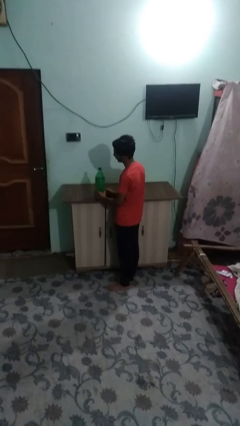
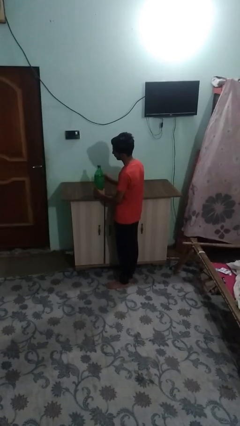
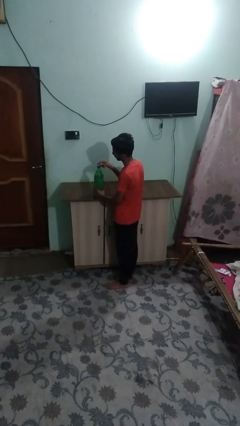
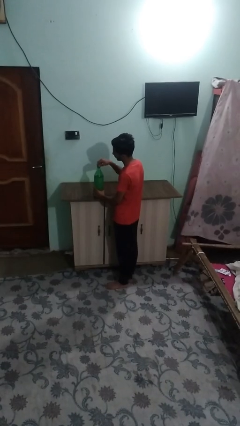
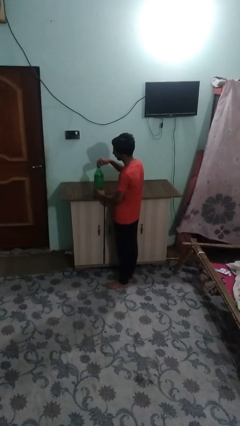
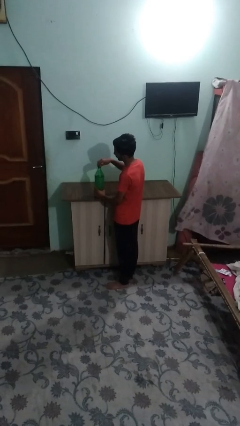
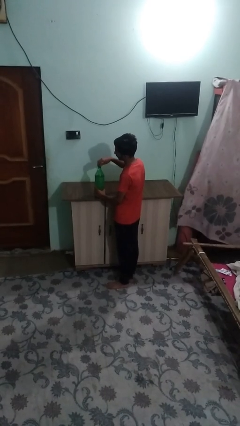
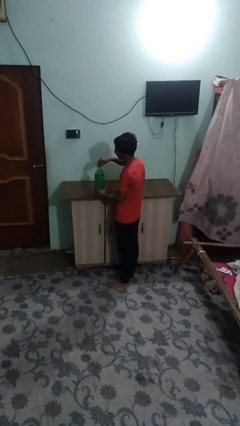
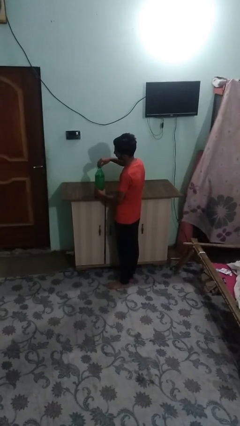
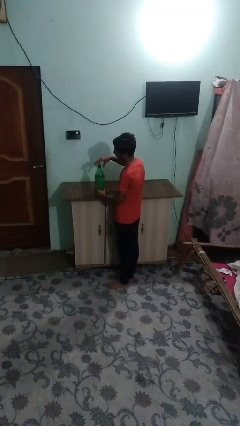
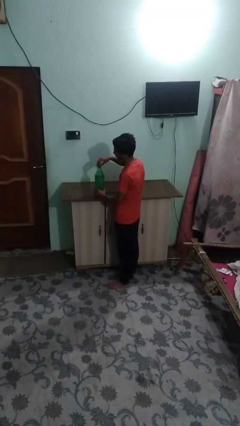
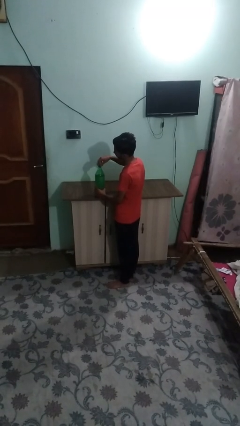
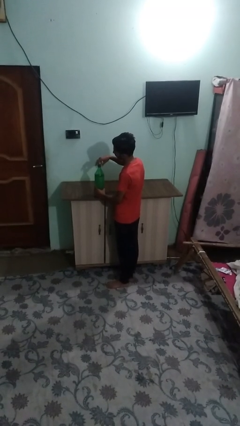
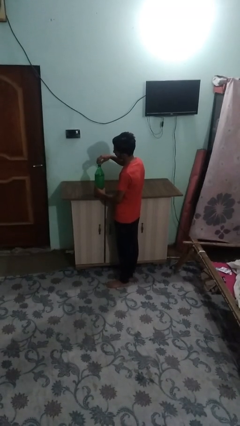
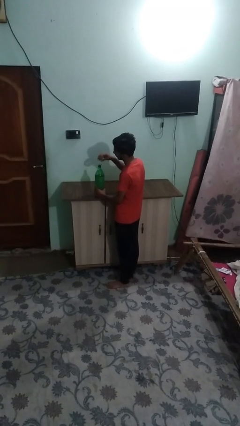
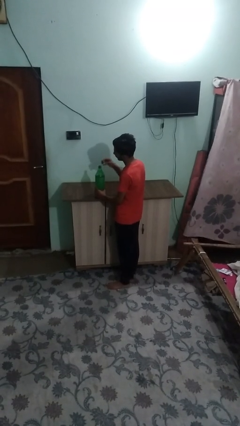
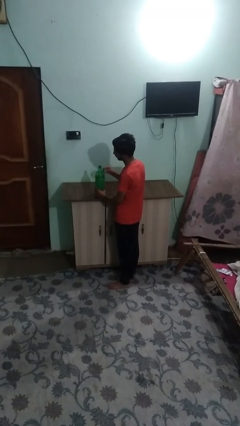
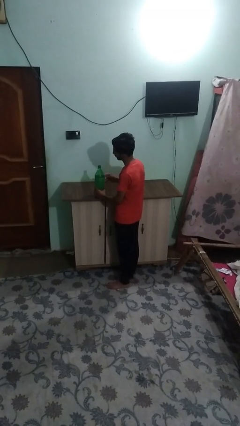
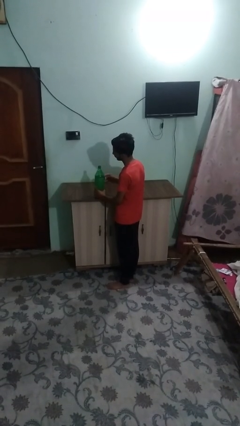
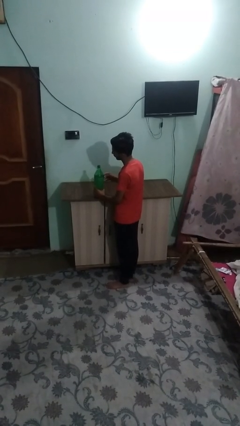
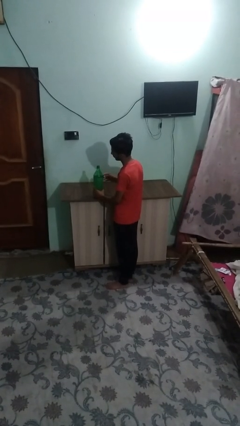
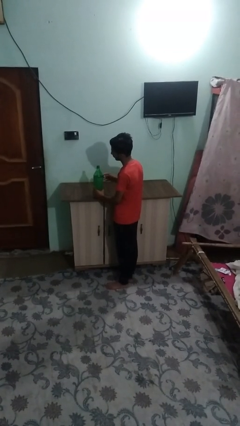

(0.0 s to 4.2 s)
person unscrews lid from bottle

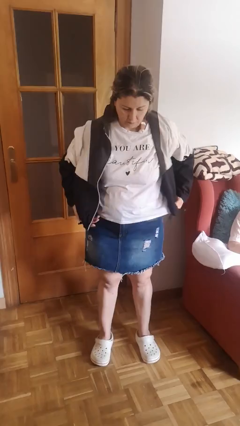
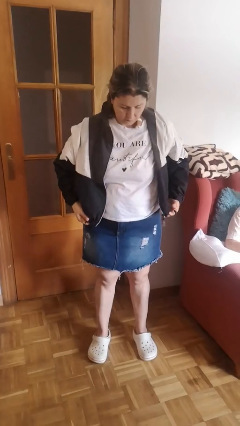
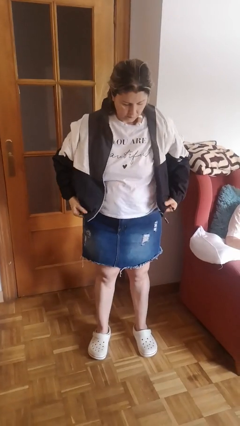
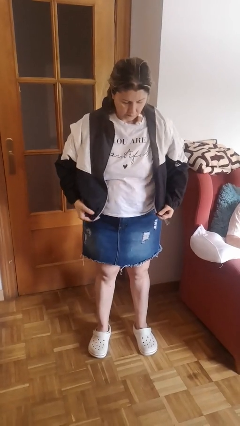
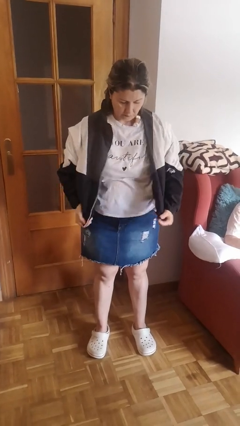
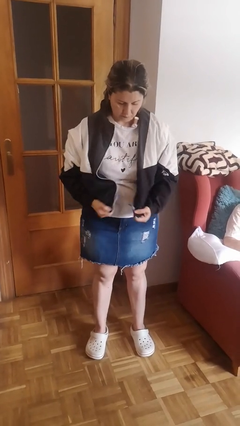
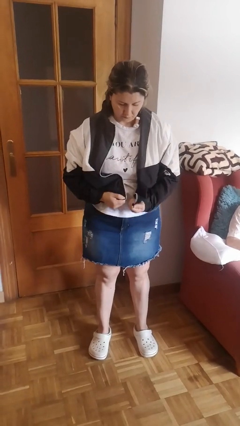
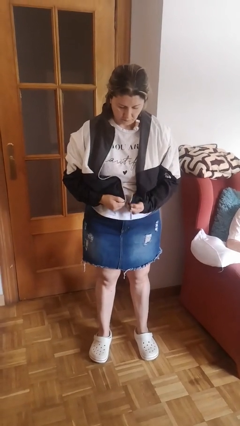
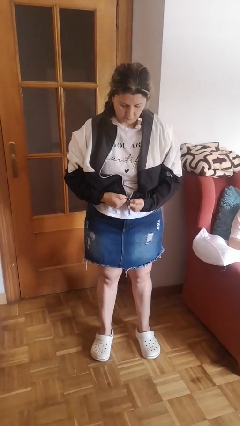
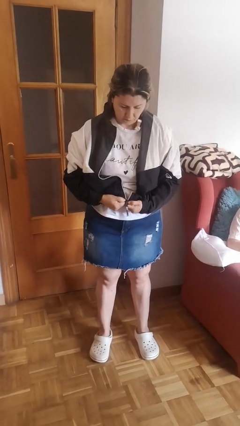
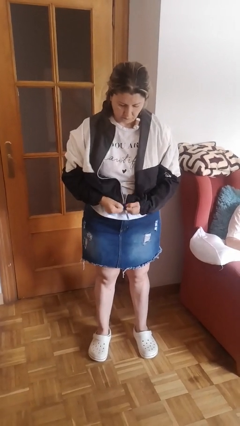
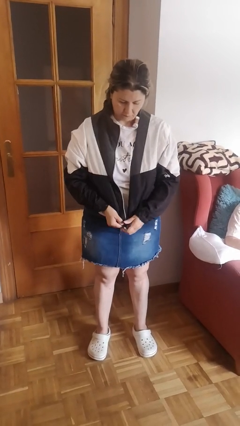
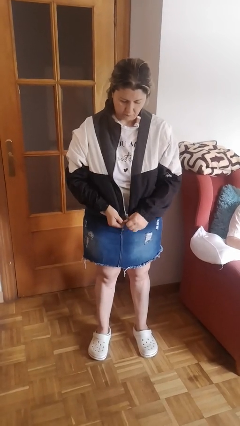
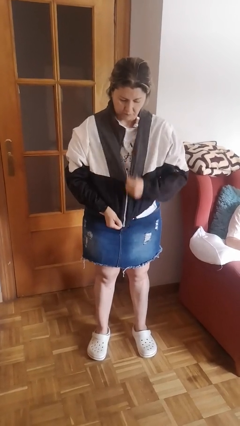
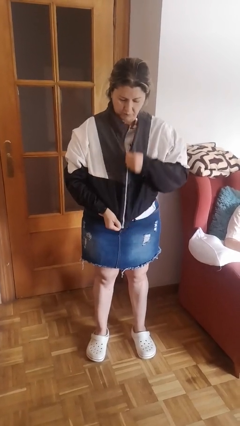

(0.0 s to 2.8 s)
person zips up jacket

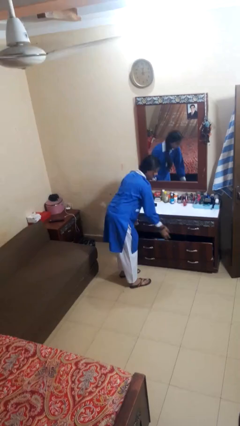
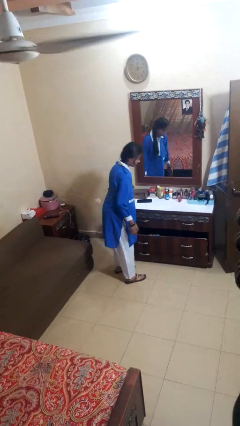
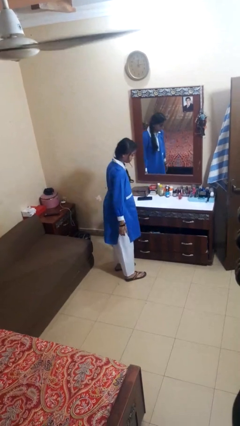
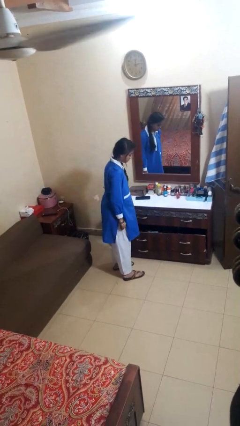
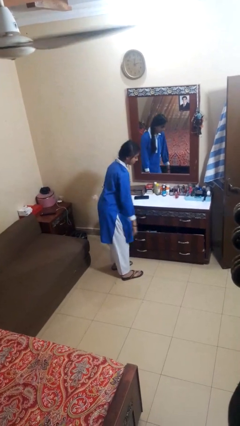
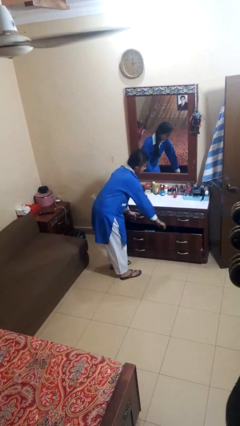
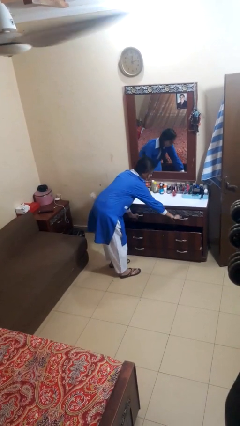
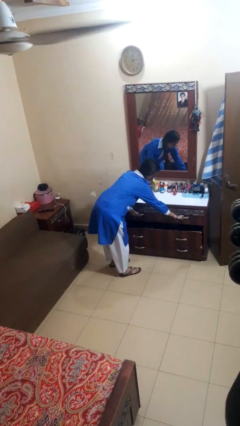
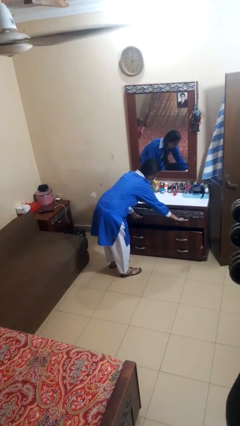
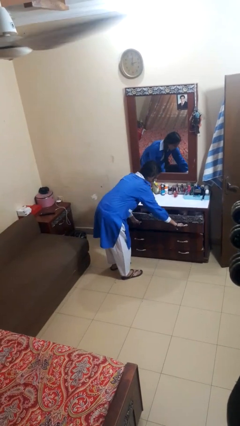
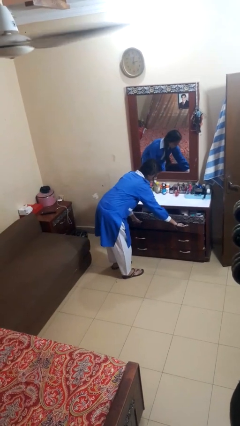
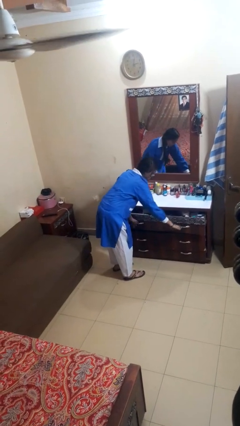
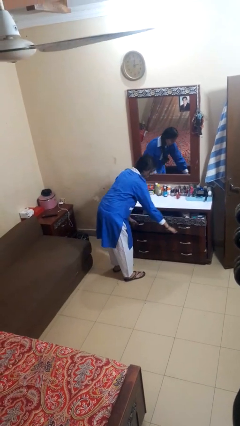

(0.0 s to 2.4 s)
person opens dresser drawer

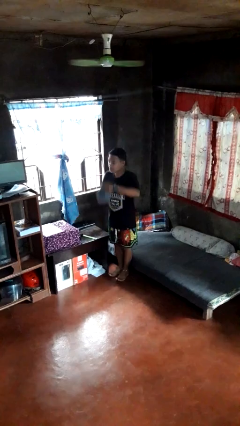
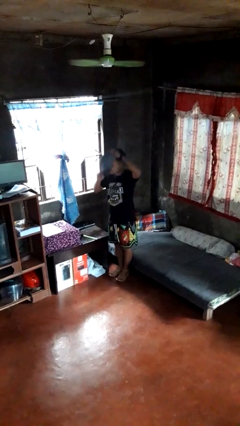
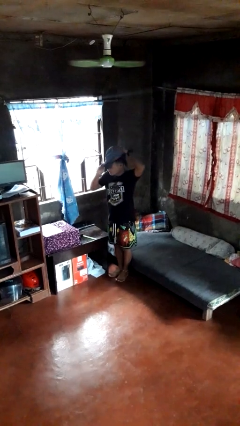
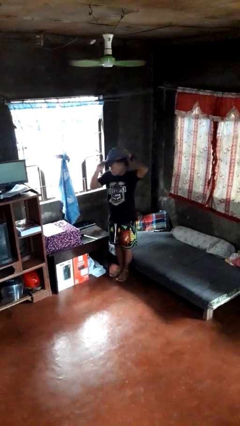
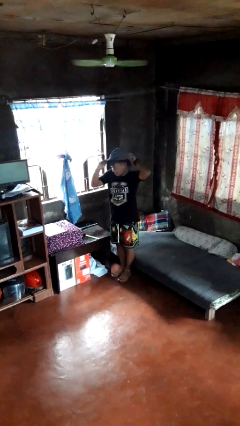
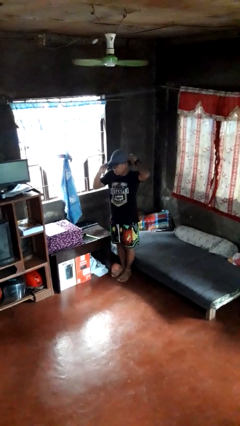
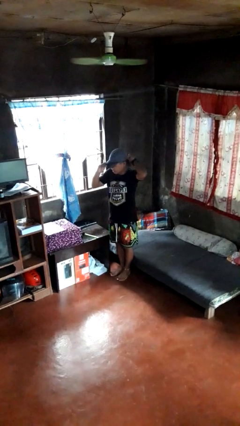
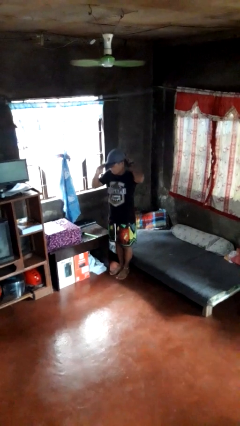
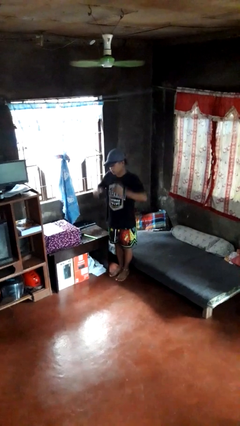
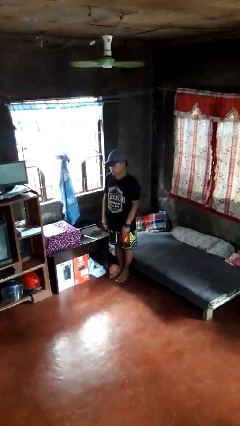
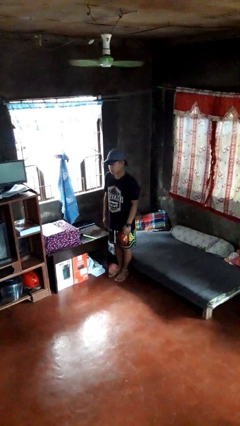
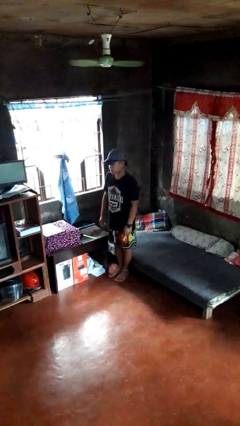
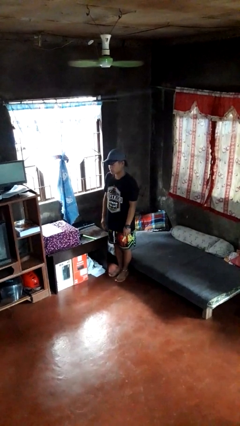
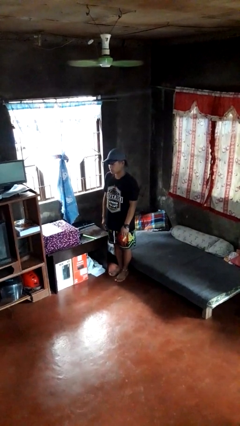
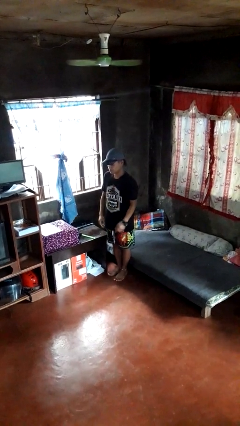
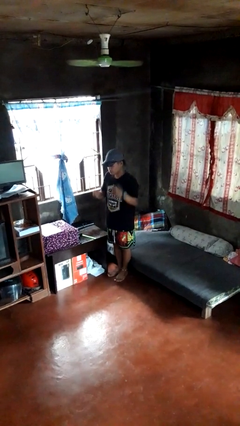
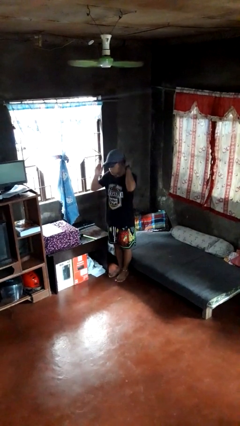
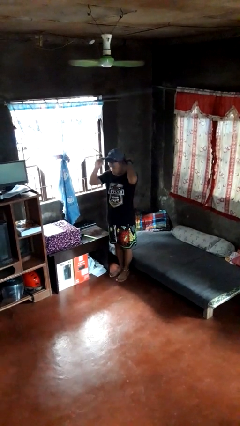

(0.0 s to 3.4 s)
person puts on hat

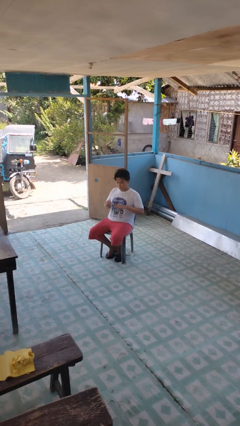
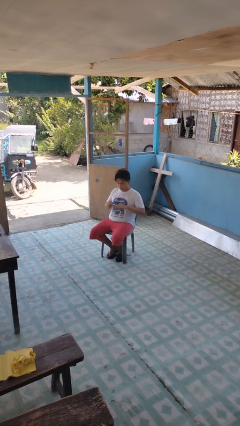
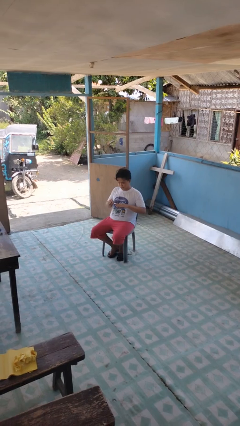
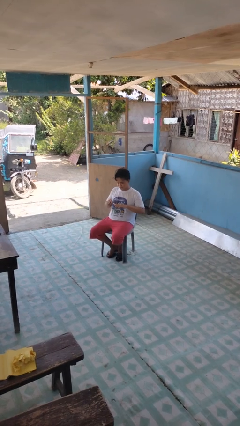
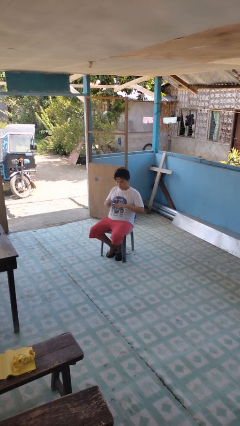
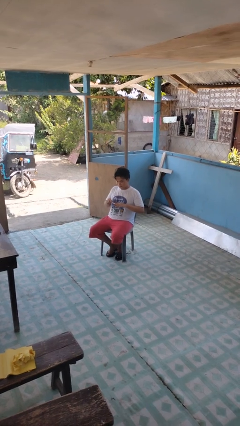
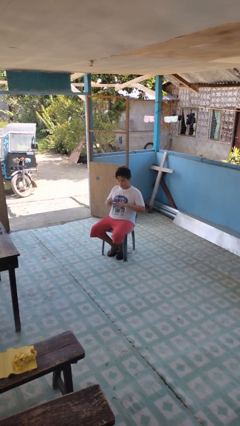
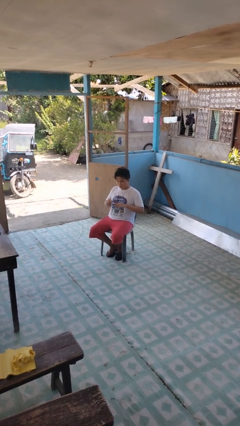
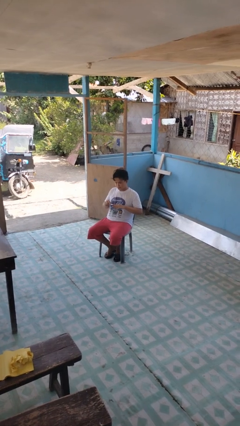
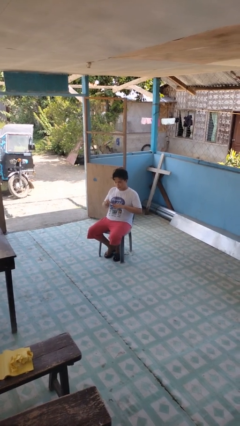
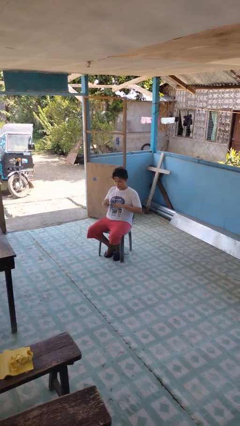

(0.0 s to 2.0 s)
person files fingernails

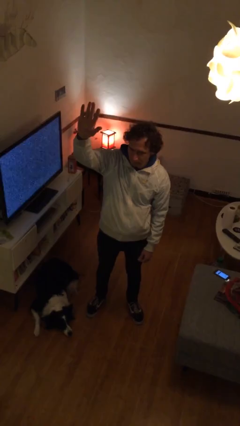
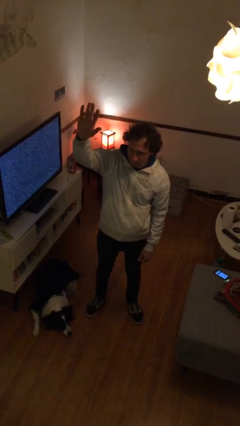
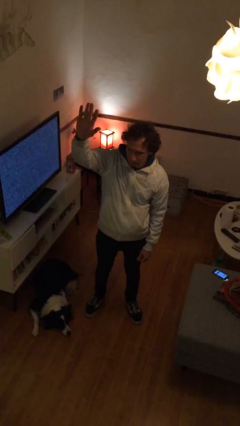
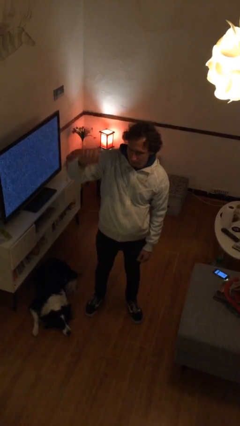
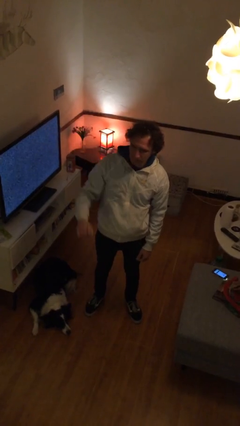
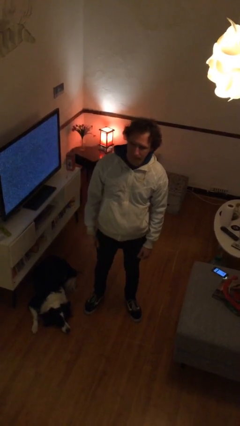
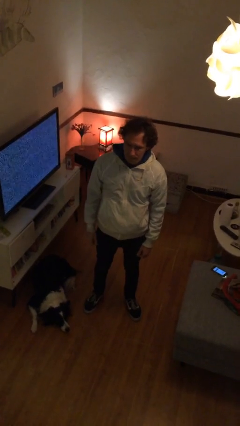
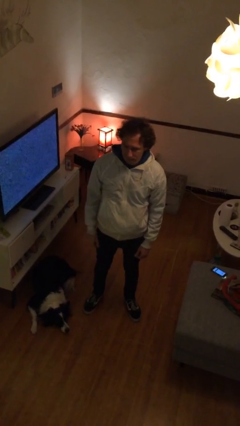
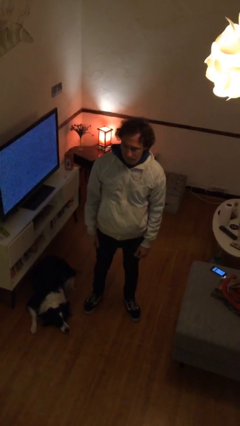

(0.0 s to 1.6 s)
person gestures lower hand

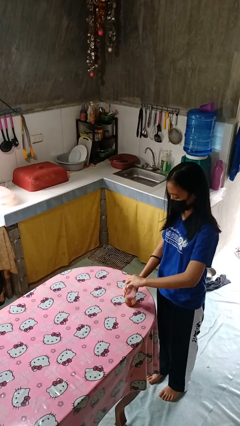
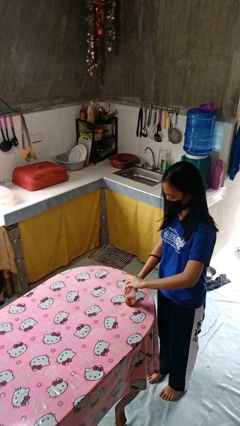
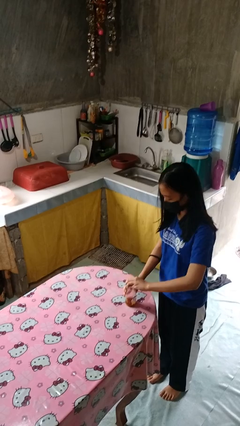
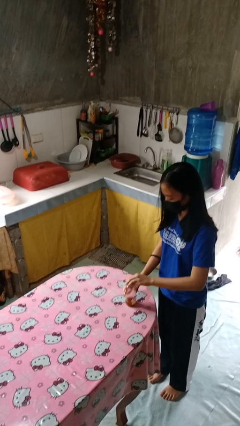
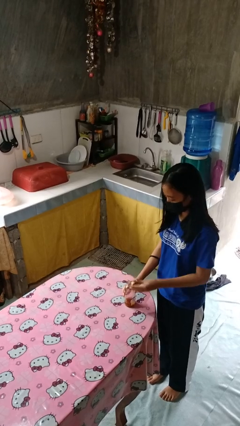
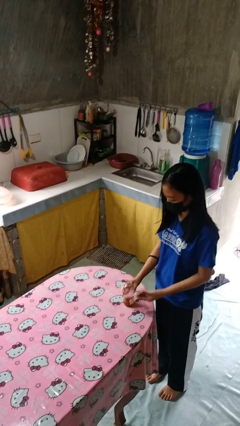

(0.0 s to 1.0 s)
person opens jar
